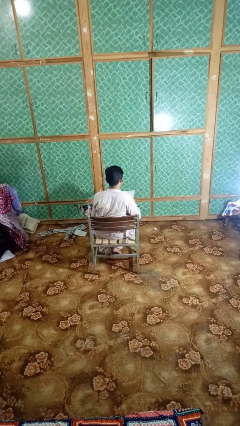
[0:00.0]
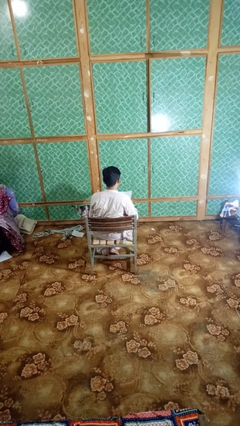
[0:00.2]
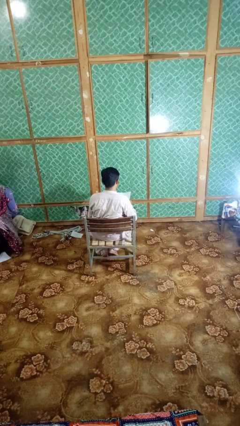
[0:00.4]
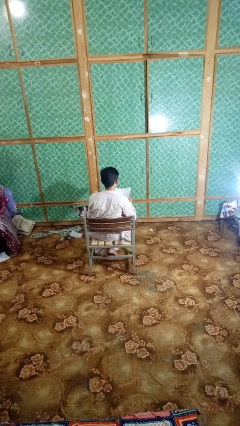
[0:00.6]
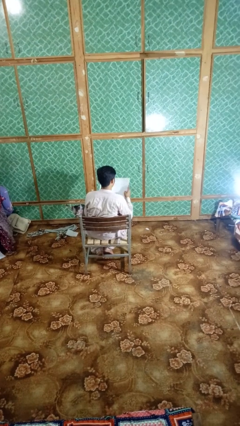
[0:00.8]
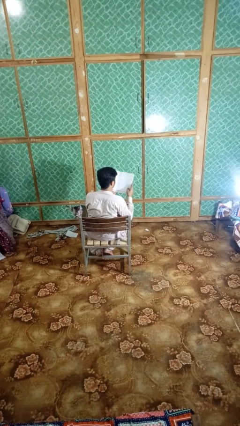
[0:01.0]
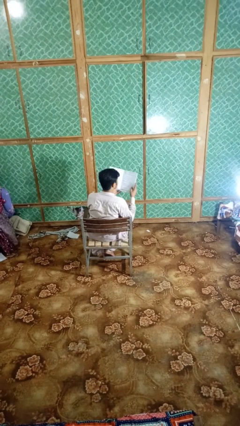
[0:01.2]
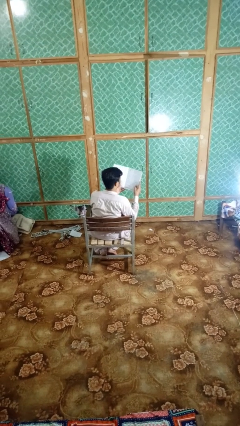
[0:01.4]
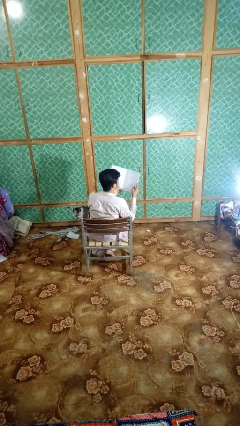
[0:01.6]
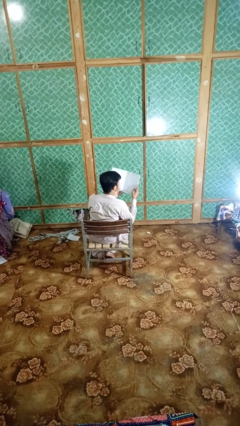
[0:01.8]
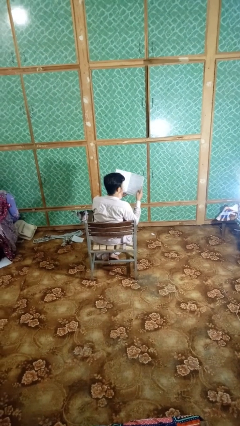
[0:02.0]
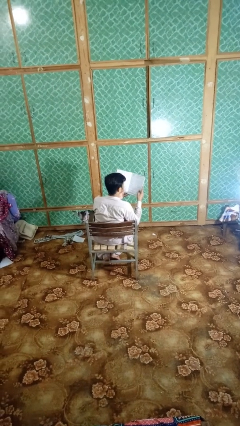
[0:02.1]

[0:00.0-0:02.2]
person reads magazine

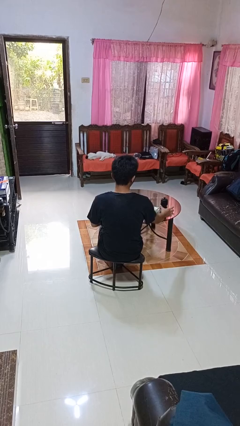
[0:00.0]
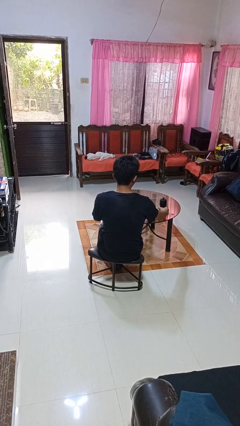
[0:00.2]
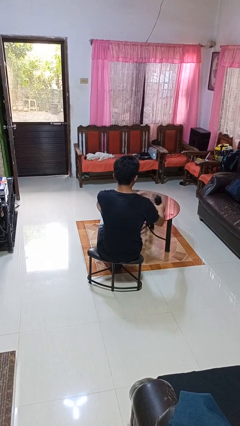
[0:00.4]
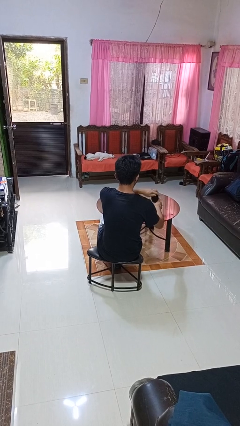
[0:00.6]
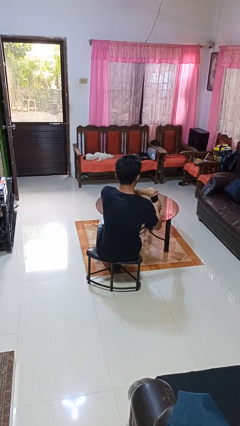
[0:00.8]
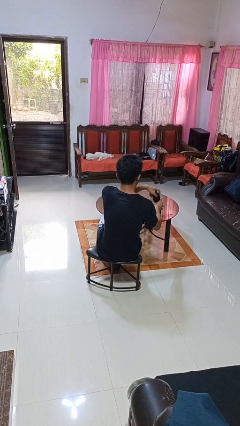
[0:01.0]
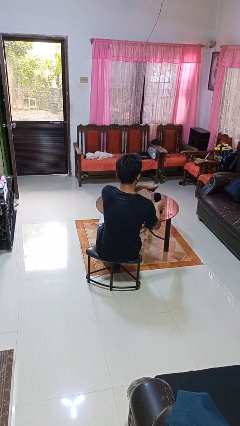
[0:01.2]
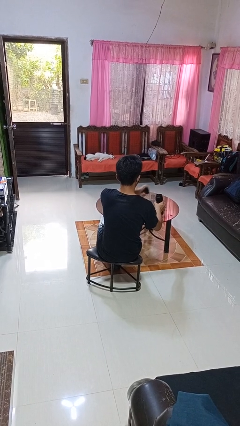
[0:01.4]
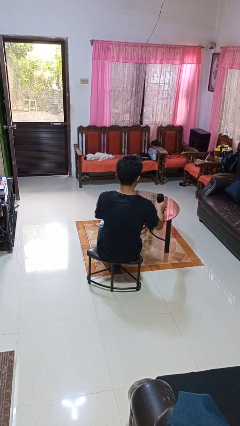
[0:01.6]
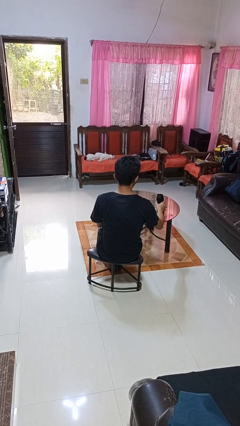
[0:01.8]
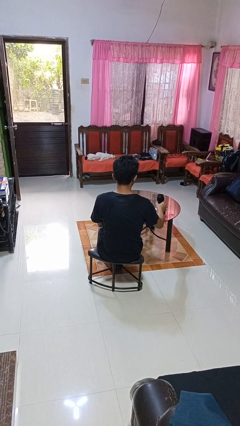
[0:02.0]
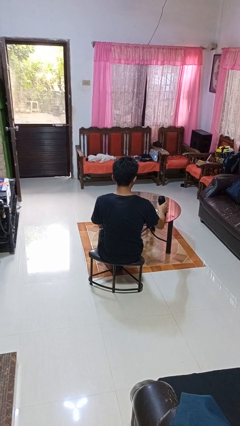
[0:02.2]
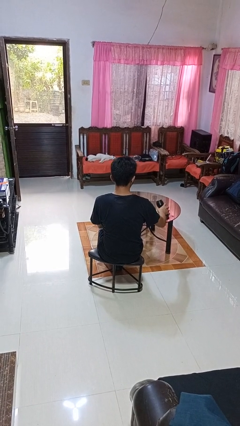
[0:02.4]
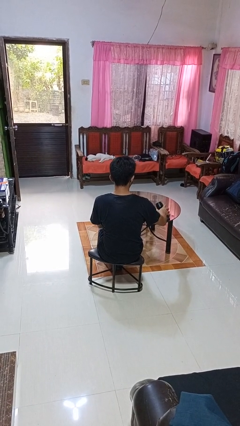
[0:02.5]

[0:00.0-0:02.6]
person unscrews lid from bottle

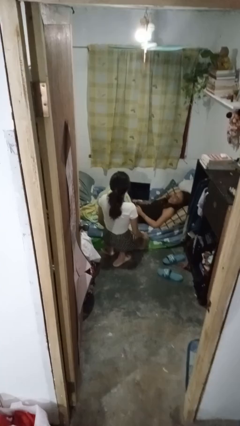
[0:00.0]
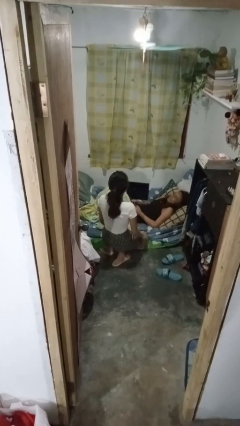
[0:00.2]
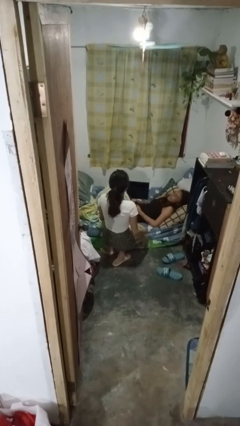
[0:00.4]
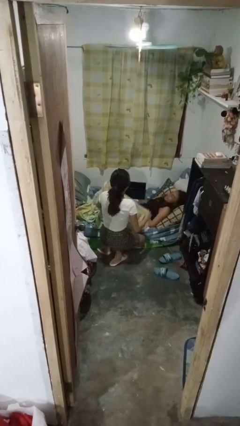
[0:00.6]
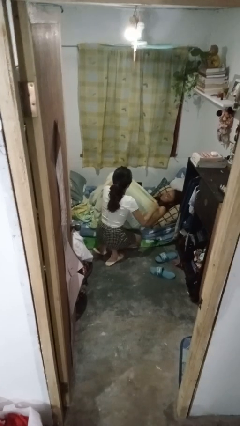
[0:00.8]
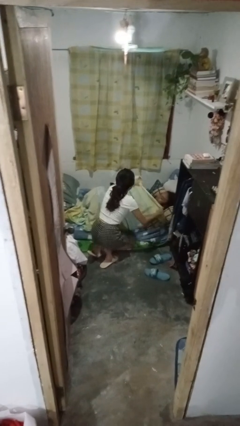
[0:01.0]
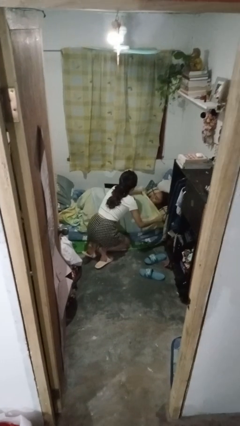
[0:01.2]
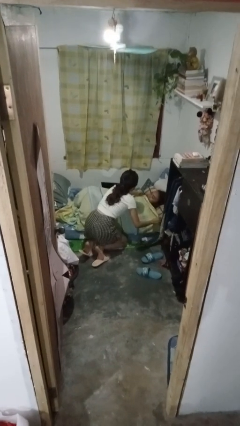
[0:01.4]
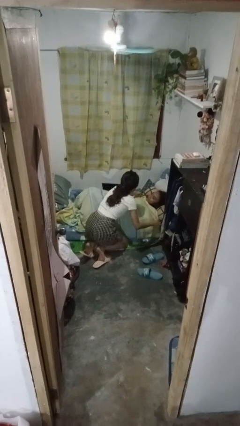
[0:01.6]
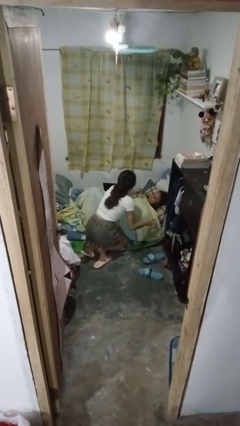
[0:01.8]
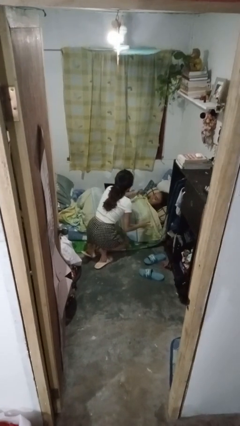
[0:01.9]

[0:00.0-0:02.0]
person covers friend with blanket

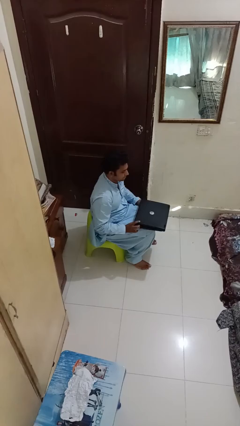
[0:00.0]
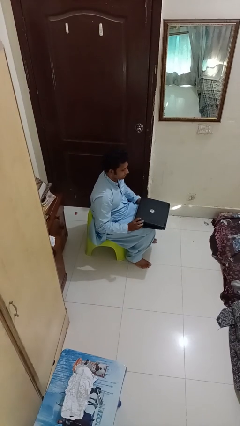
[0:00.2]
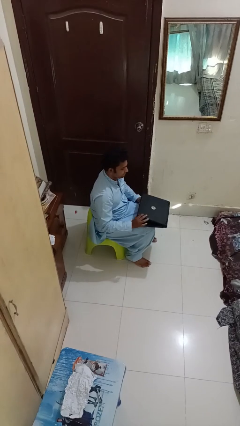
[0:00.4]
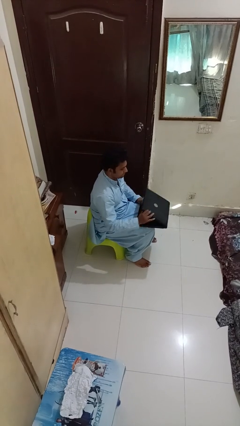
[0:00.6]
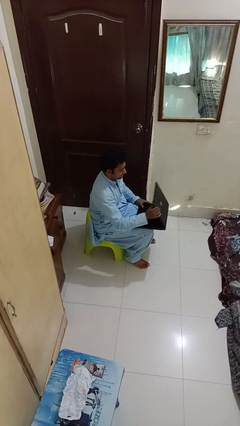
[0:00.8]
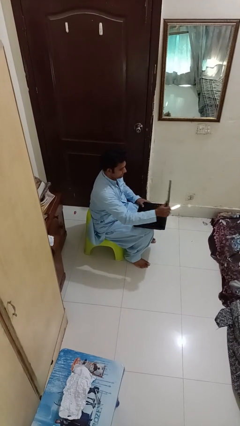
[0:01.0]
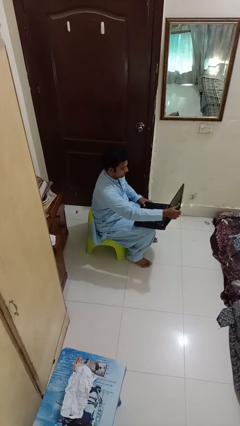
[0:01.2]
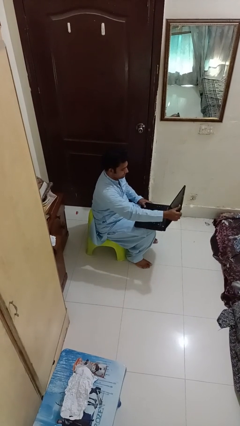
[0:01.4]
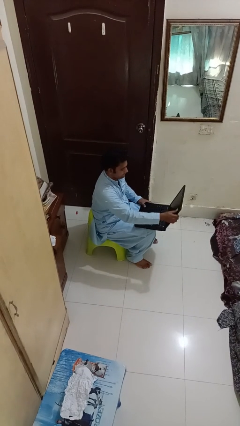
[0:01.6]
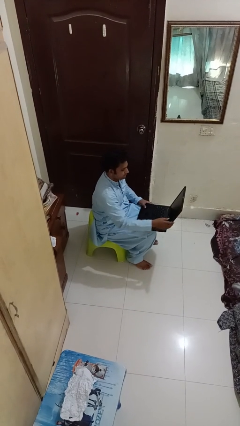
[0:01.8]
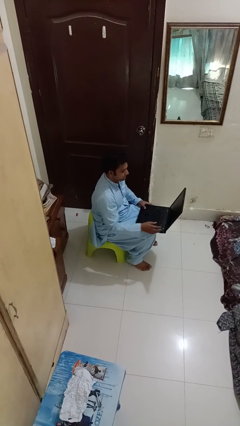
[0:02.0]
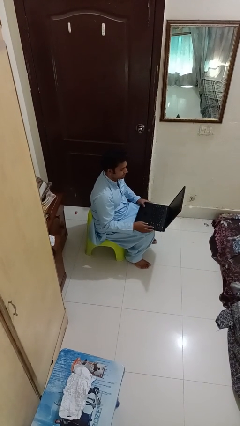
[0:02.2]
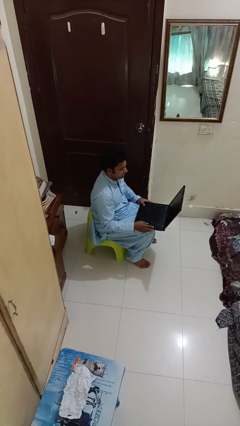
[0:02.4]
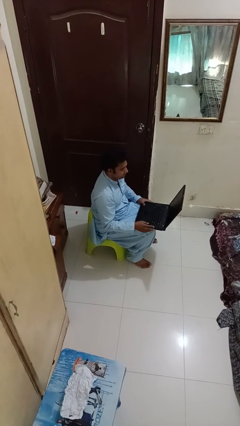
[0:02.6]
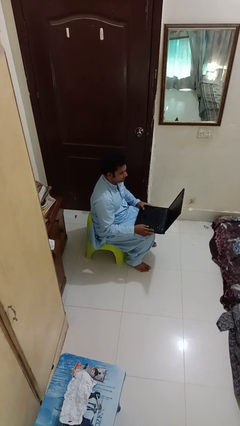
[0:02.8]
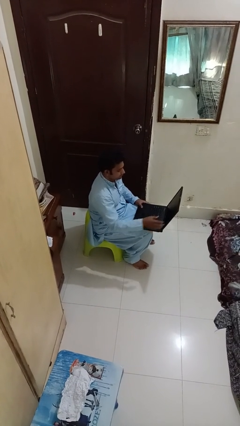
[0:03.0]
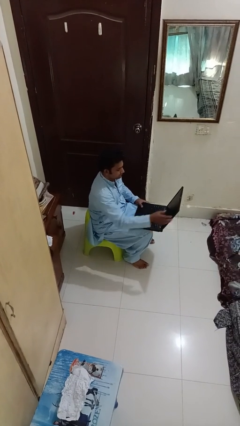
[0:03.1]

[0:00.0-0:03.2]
person opens laptop

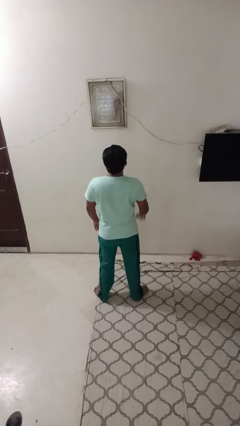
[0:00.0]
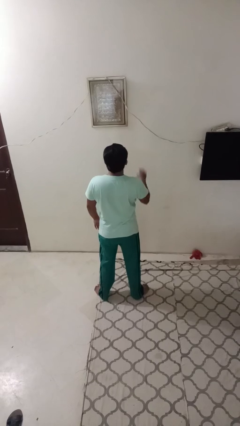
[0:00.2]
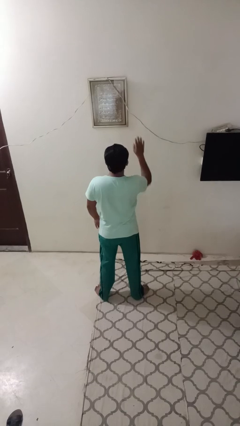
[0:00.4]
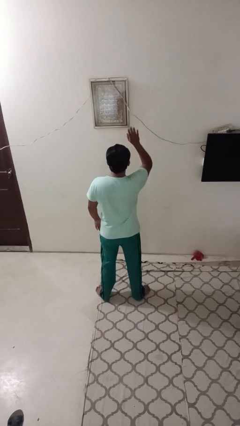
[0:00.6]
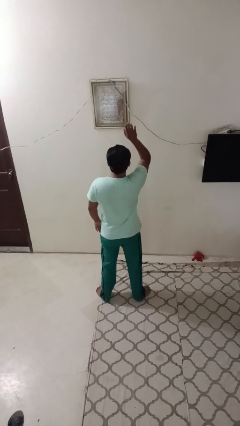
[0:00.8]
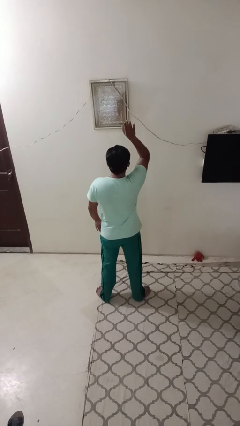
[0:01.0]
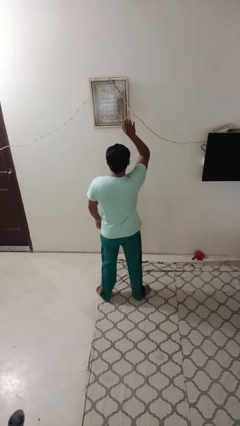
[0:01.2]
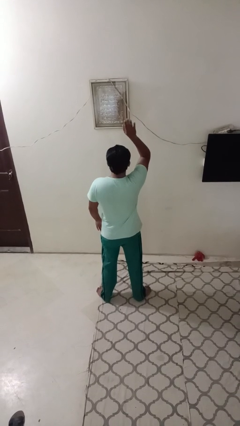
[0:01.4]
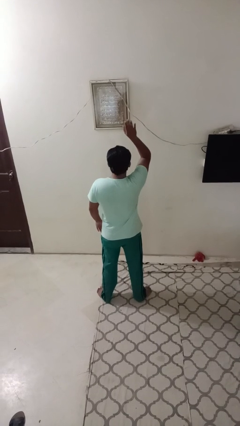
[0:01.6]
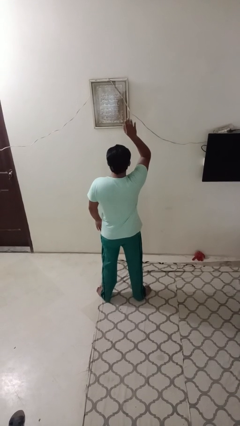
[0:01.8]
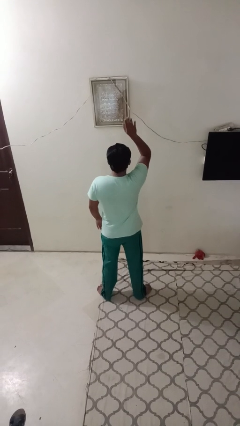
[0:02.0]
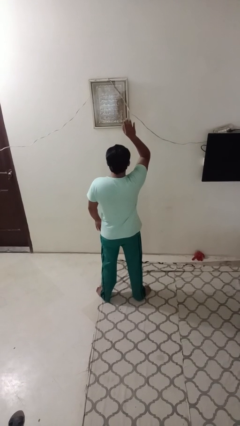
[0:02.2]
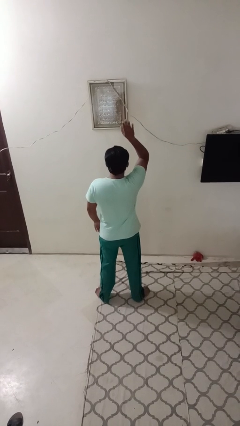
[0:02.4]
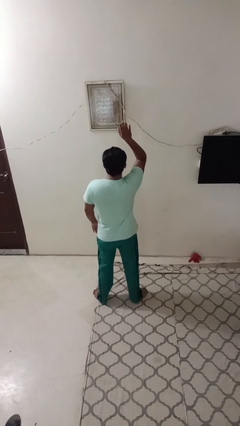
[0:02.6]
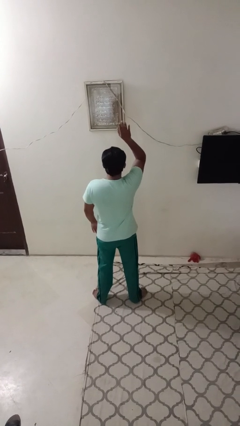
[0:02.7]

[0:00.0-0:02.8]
person gestures raise hand

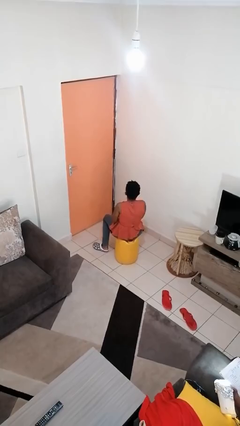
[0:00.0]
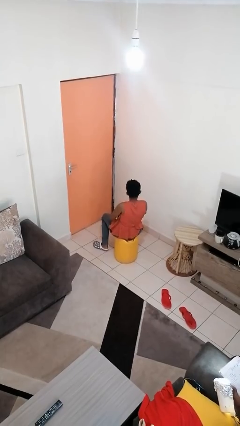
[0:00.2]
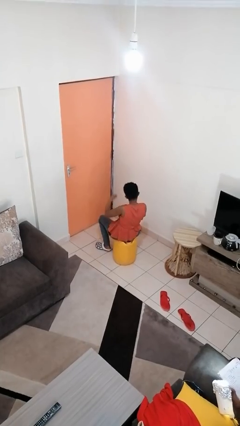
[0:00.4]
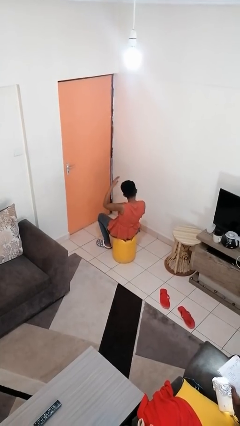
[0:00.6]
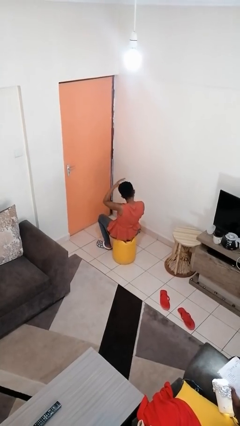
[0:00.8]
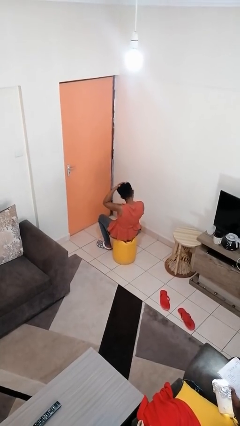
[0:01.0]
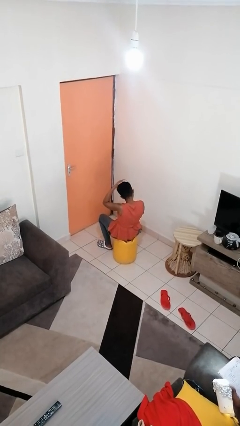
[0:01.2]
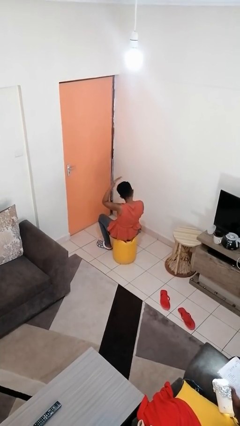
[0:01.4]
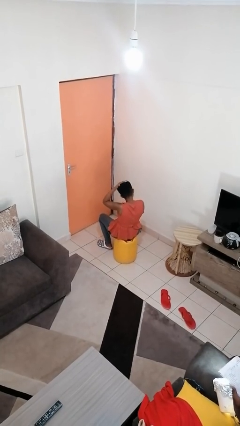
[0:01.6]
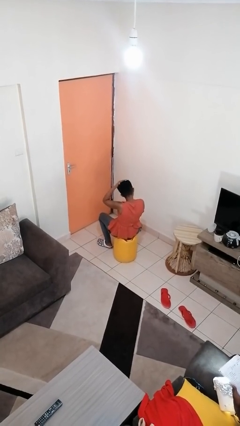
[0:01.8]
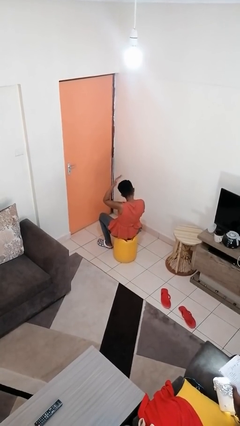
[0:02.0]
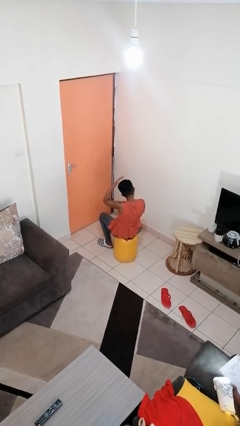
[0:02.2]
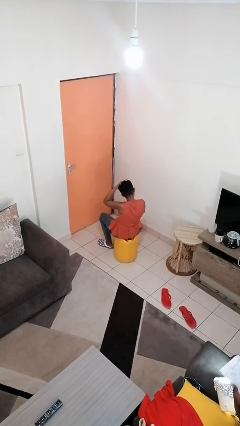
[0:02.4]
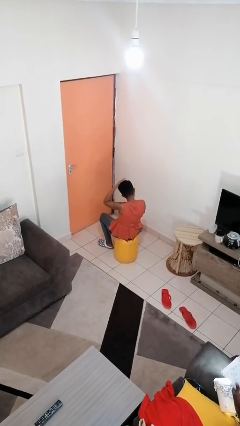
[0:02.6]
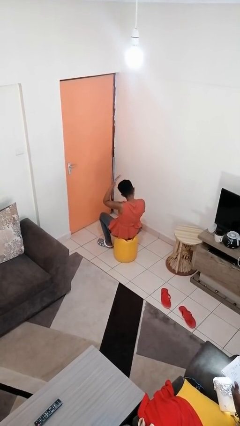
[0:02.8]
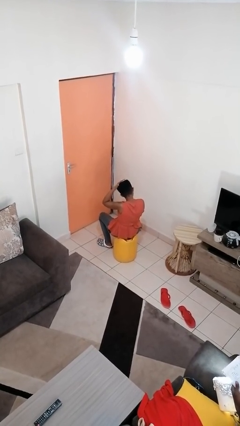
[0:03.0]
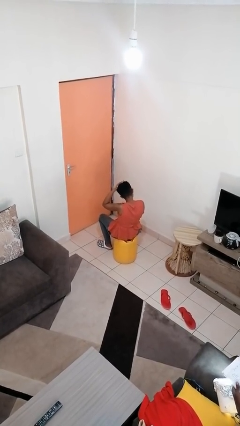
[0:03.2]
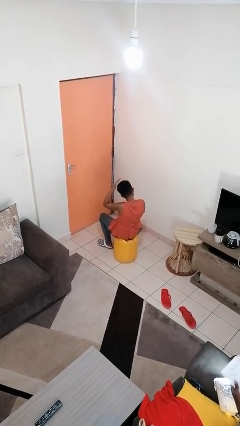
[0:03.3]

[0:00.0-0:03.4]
person pats head

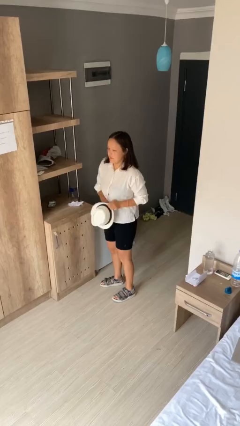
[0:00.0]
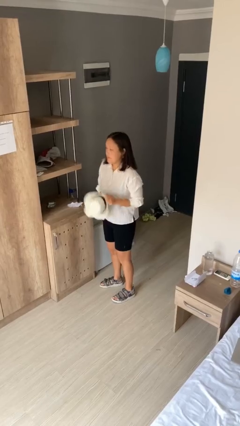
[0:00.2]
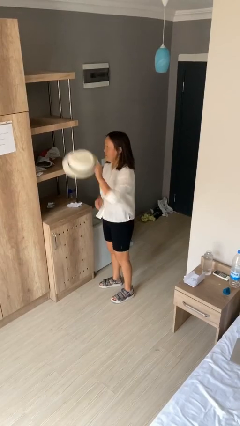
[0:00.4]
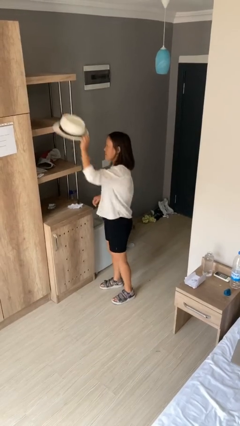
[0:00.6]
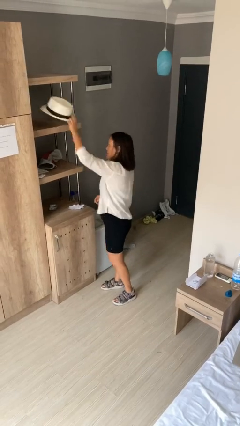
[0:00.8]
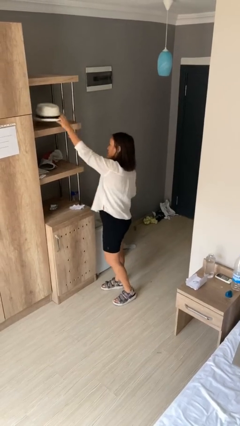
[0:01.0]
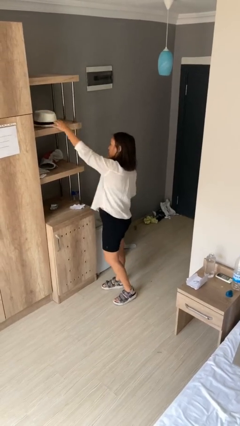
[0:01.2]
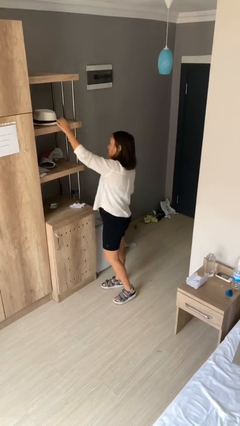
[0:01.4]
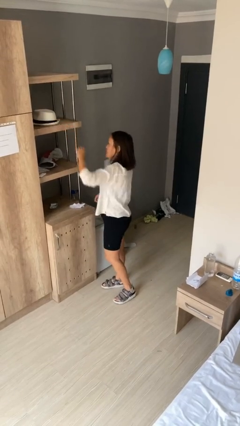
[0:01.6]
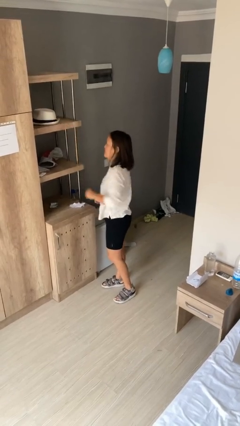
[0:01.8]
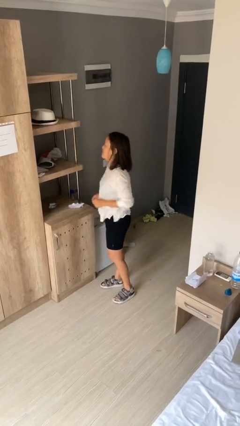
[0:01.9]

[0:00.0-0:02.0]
person puts down object on shelf
